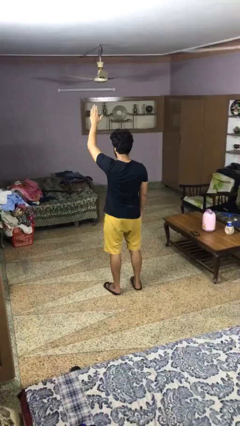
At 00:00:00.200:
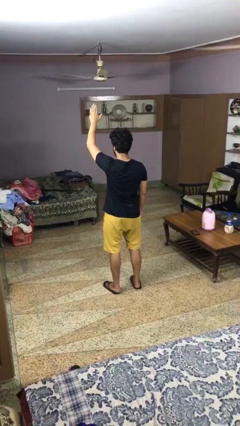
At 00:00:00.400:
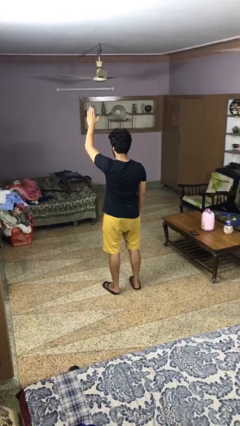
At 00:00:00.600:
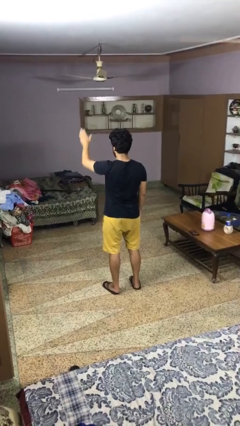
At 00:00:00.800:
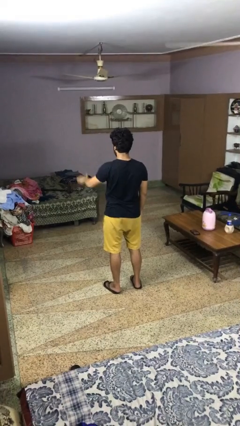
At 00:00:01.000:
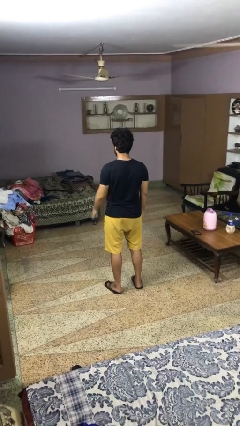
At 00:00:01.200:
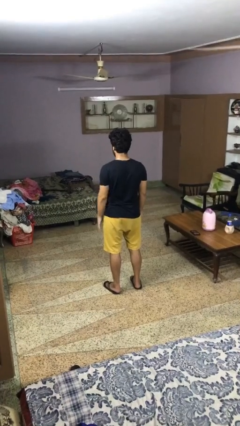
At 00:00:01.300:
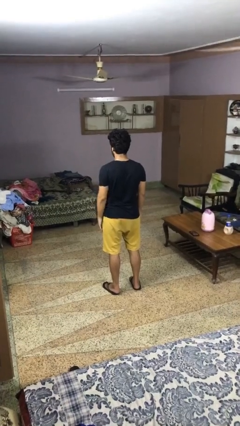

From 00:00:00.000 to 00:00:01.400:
person gestures lower hand

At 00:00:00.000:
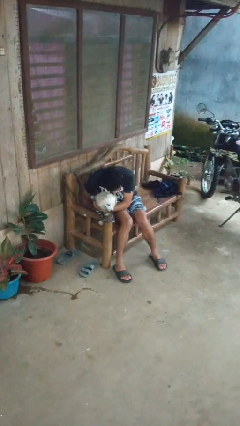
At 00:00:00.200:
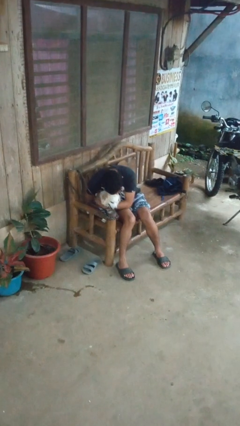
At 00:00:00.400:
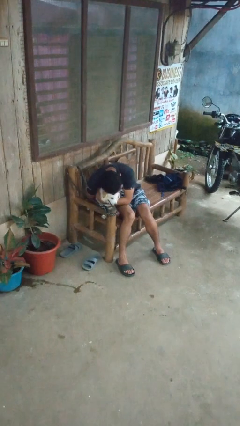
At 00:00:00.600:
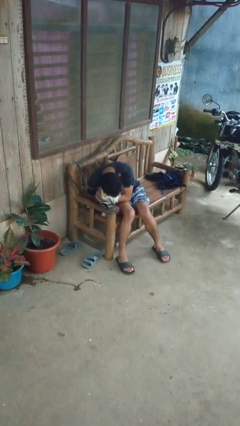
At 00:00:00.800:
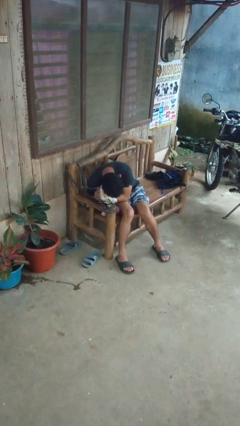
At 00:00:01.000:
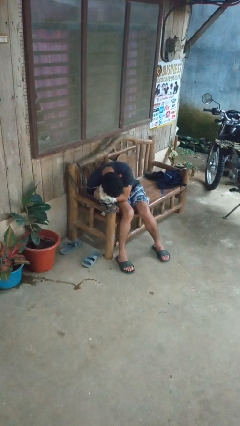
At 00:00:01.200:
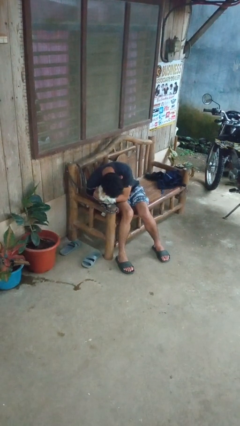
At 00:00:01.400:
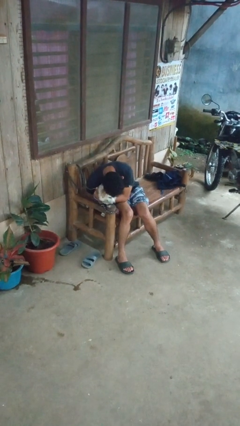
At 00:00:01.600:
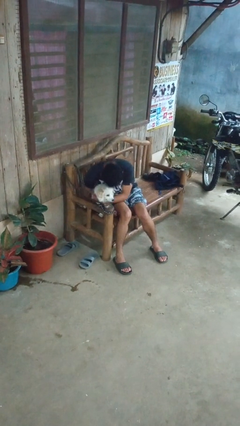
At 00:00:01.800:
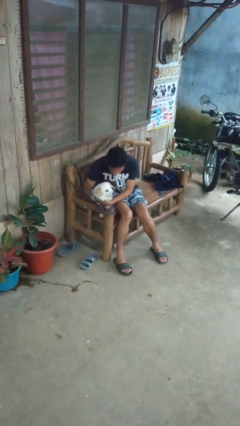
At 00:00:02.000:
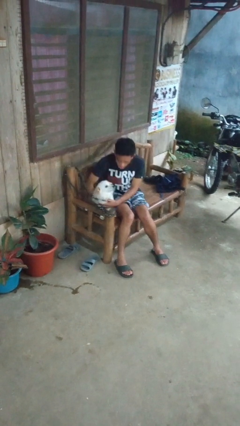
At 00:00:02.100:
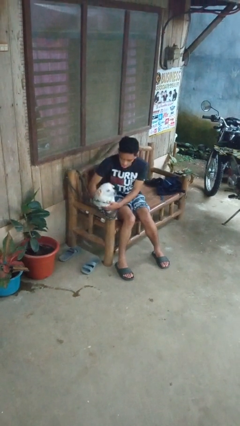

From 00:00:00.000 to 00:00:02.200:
person hugs dog

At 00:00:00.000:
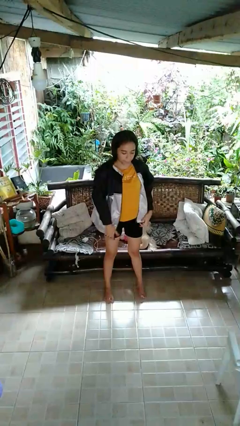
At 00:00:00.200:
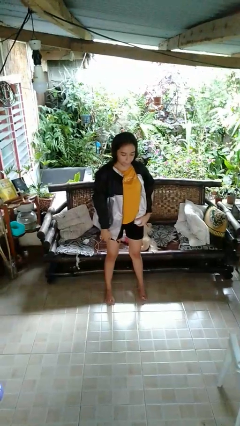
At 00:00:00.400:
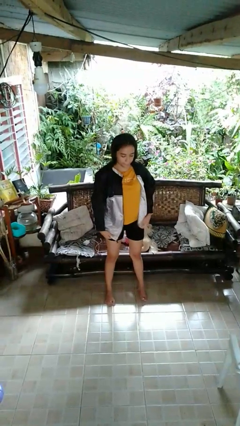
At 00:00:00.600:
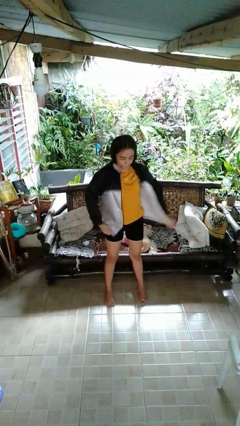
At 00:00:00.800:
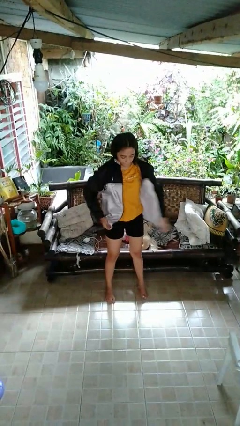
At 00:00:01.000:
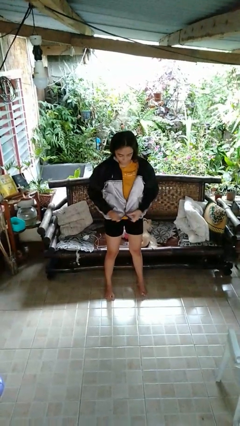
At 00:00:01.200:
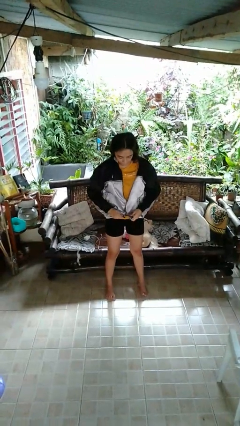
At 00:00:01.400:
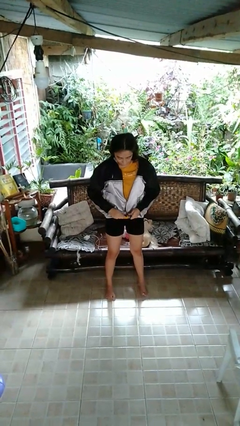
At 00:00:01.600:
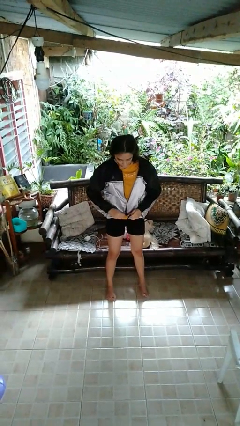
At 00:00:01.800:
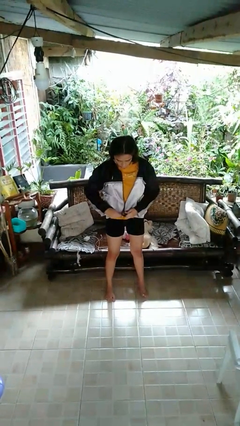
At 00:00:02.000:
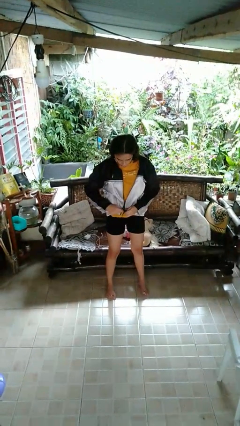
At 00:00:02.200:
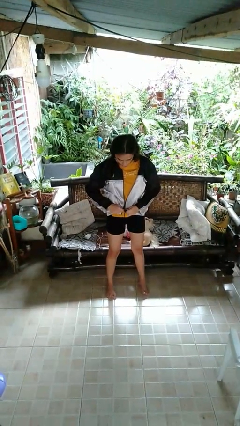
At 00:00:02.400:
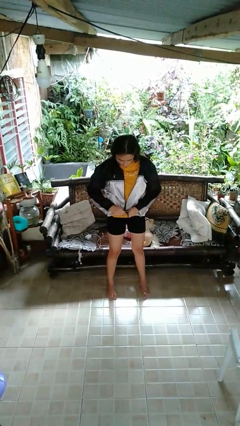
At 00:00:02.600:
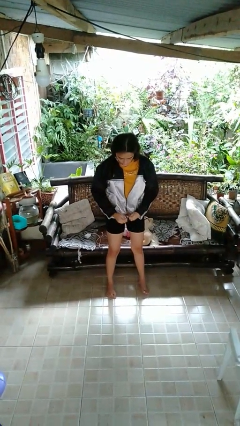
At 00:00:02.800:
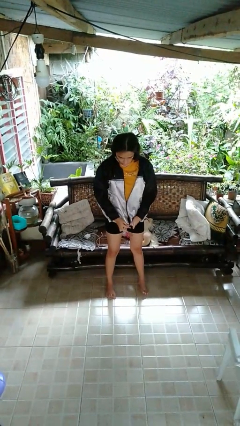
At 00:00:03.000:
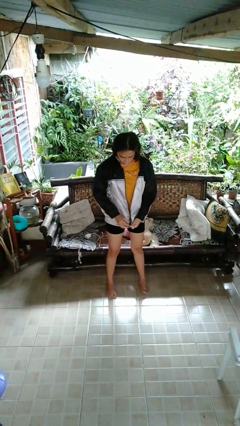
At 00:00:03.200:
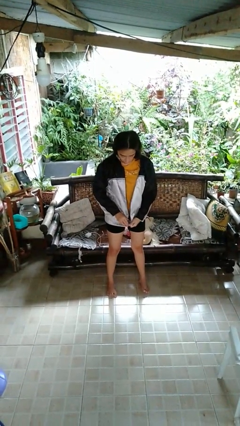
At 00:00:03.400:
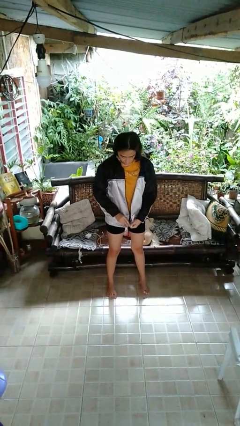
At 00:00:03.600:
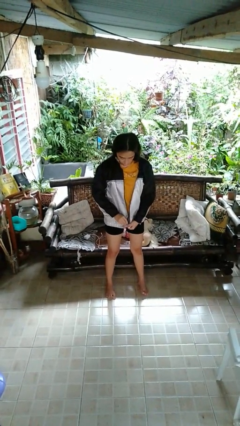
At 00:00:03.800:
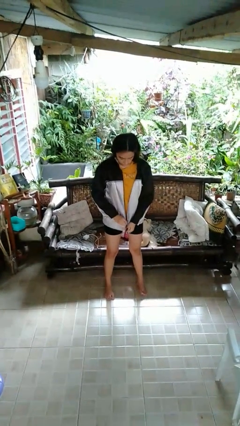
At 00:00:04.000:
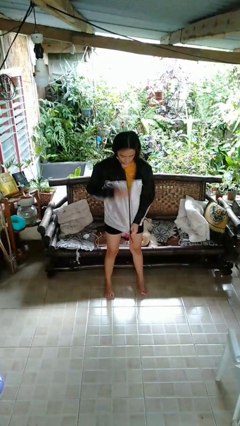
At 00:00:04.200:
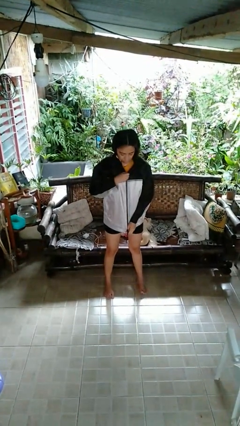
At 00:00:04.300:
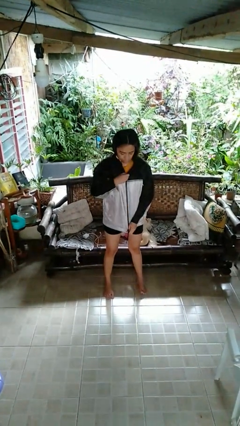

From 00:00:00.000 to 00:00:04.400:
person zips up jacket

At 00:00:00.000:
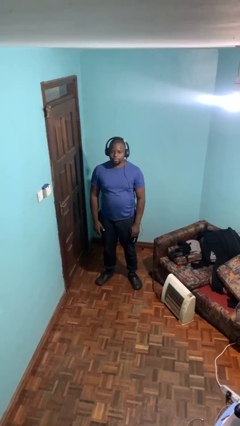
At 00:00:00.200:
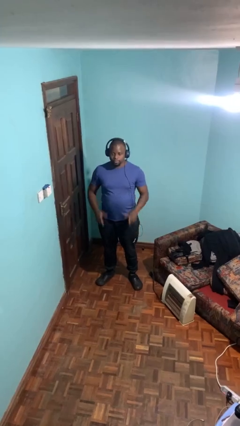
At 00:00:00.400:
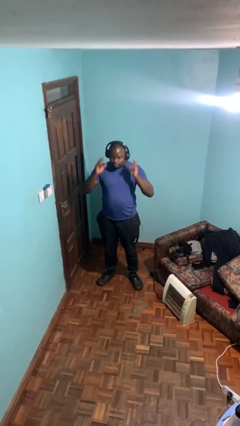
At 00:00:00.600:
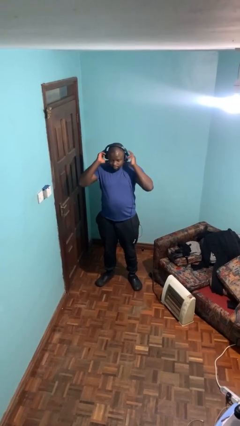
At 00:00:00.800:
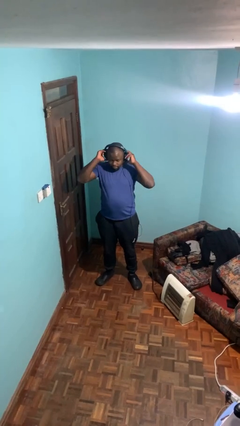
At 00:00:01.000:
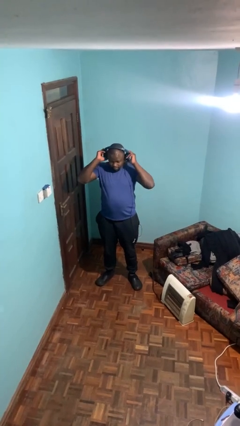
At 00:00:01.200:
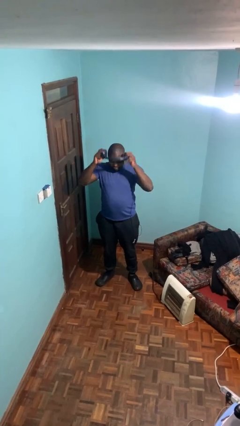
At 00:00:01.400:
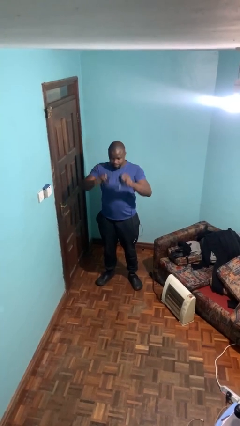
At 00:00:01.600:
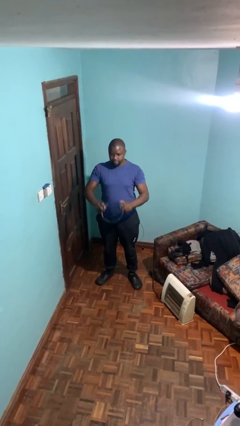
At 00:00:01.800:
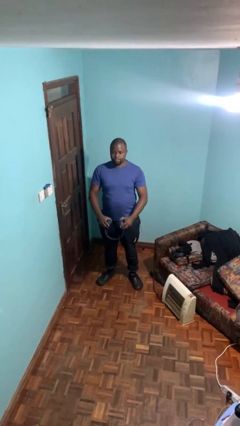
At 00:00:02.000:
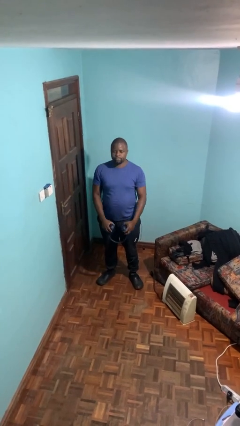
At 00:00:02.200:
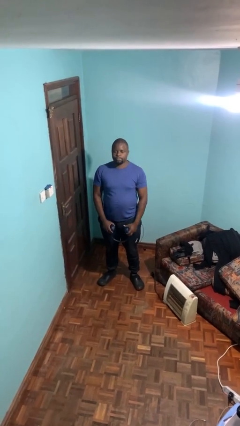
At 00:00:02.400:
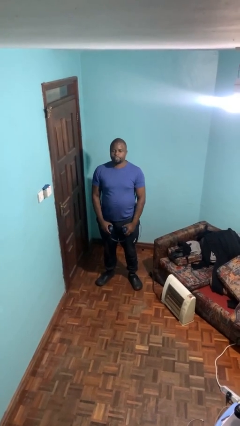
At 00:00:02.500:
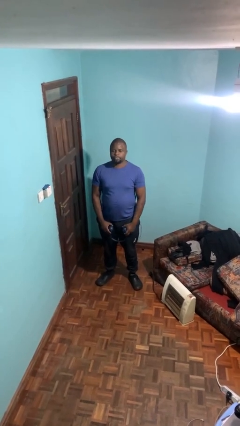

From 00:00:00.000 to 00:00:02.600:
person takes off headphones

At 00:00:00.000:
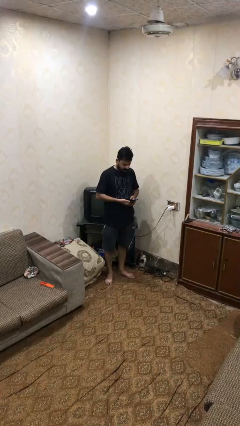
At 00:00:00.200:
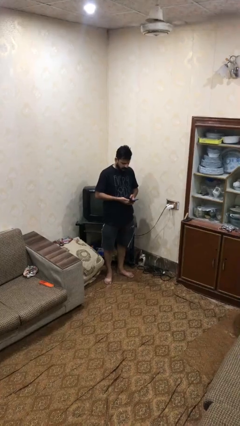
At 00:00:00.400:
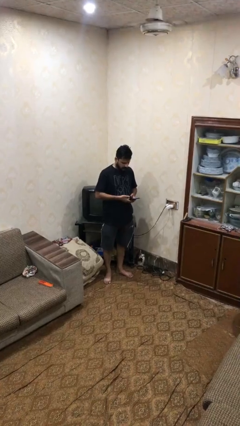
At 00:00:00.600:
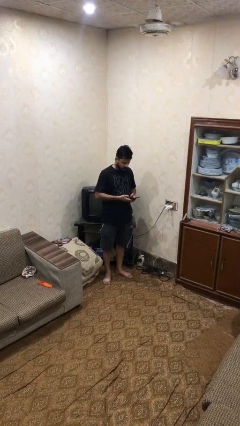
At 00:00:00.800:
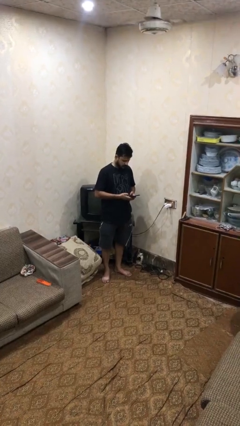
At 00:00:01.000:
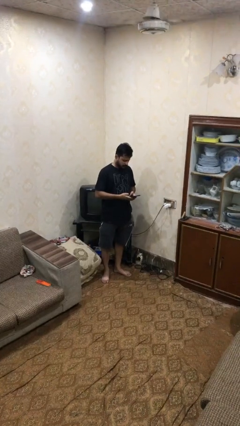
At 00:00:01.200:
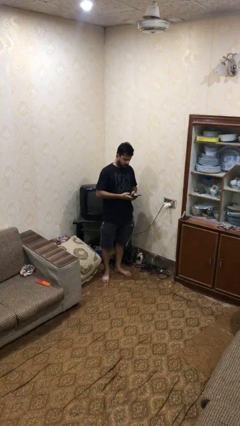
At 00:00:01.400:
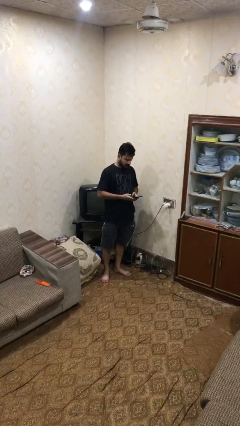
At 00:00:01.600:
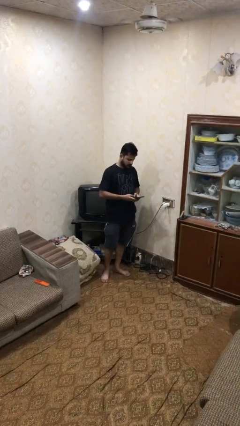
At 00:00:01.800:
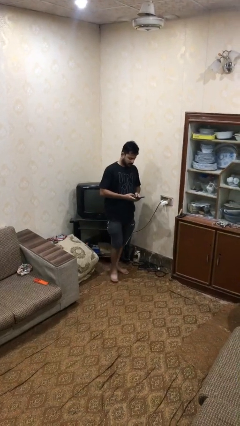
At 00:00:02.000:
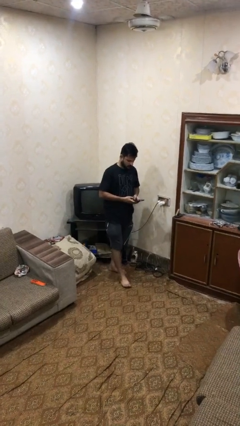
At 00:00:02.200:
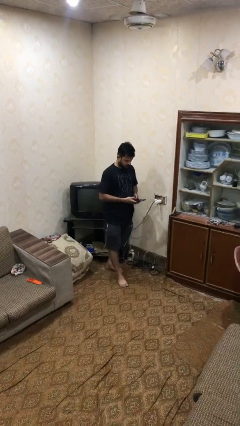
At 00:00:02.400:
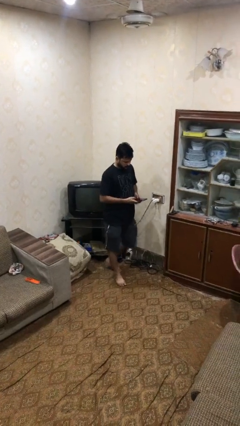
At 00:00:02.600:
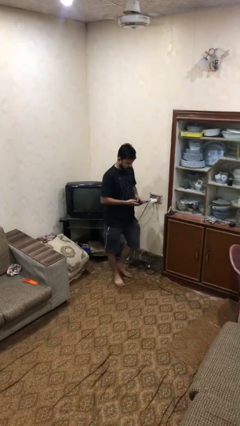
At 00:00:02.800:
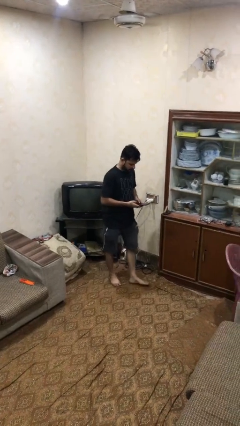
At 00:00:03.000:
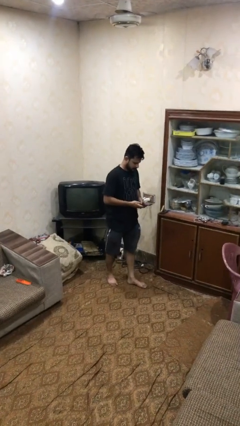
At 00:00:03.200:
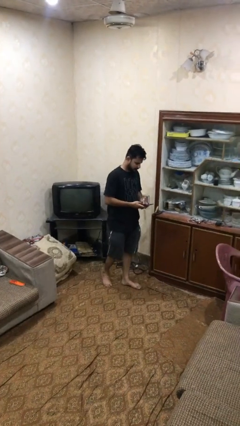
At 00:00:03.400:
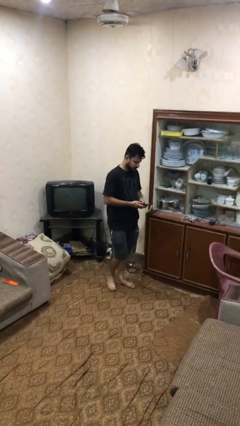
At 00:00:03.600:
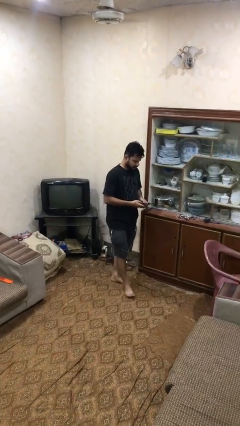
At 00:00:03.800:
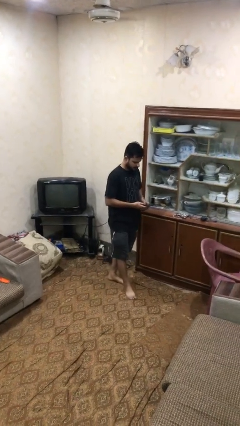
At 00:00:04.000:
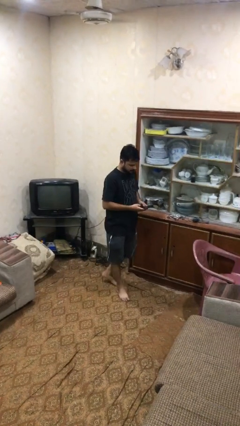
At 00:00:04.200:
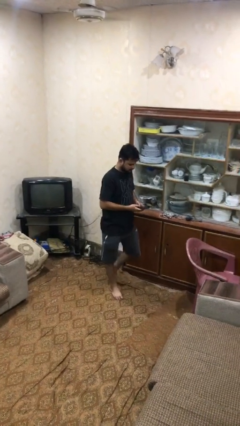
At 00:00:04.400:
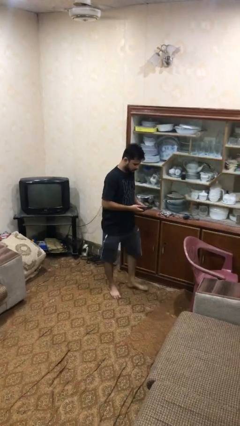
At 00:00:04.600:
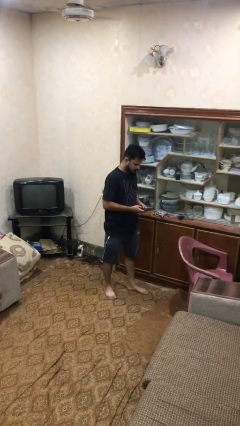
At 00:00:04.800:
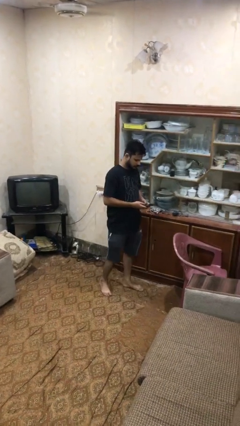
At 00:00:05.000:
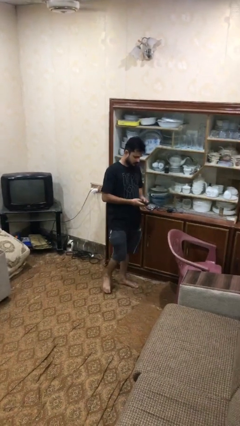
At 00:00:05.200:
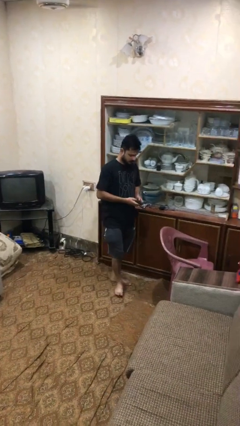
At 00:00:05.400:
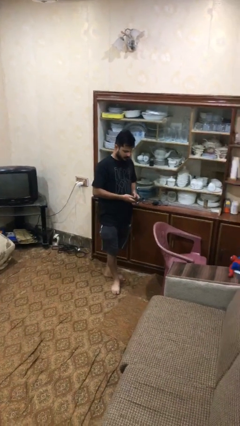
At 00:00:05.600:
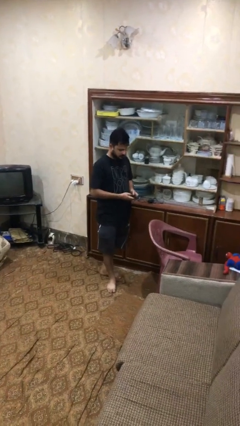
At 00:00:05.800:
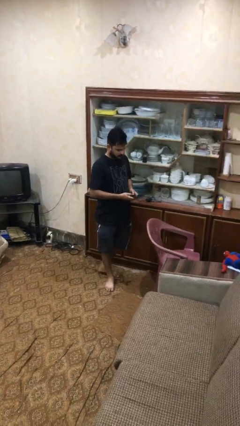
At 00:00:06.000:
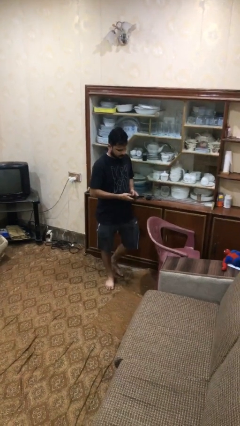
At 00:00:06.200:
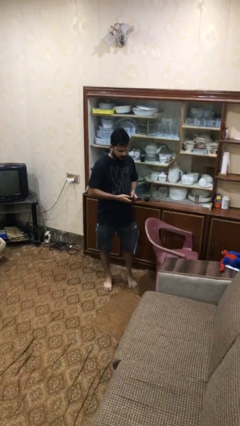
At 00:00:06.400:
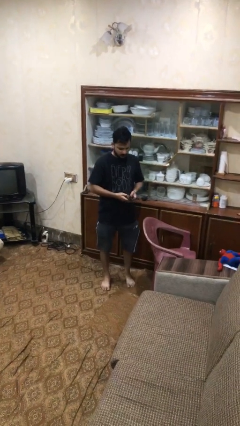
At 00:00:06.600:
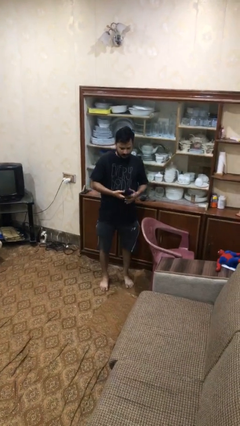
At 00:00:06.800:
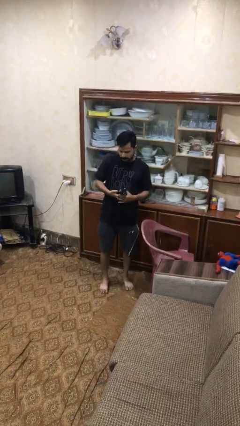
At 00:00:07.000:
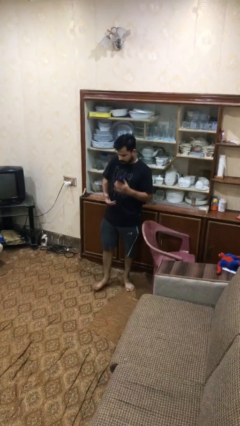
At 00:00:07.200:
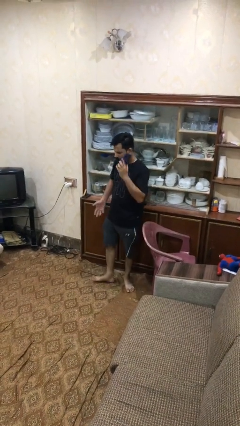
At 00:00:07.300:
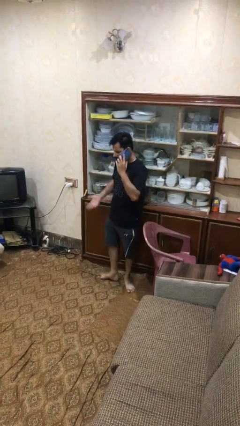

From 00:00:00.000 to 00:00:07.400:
person texts on phone
